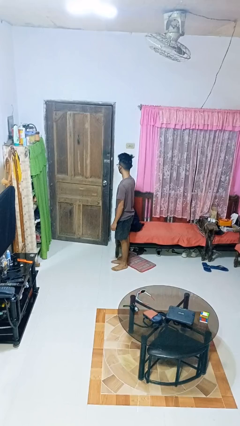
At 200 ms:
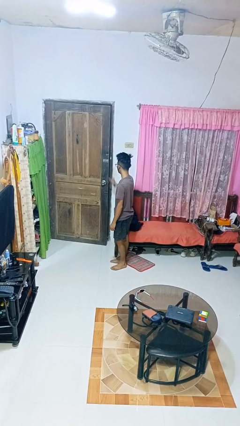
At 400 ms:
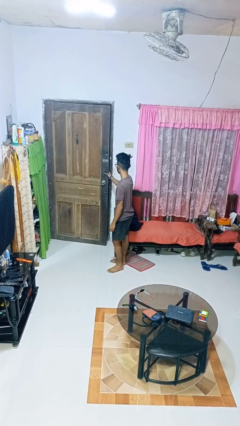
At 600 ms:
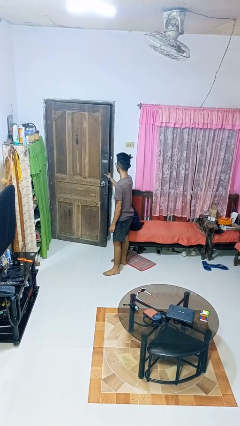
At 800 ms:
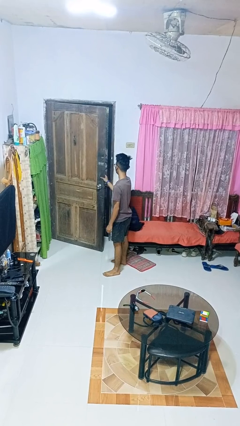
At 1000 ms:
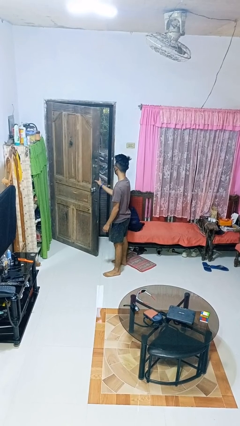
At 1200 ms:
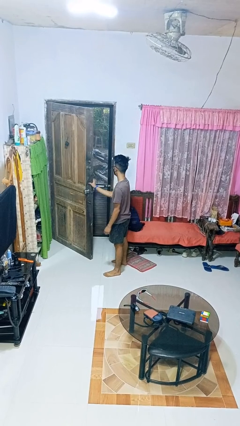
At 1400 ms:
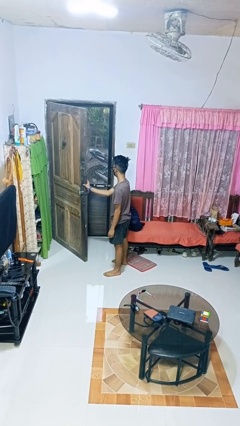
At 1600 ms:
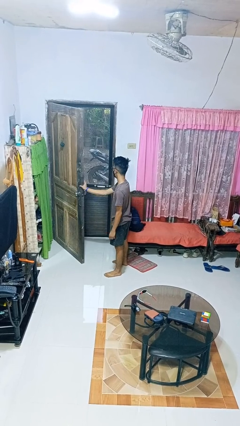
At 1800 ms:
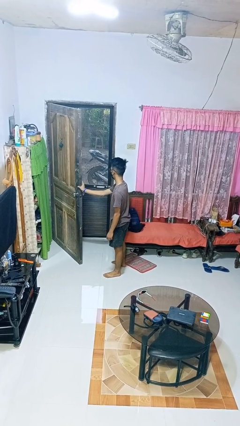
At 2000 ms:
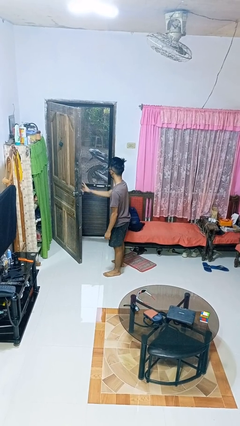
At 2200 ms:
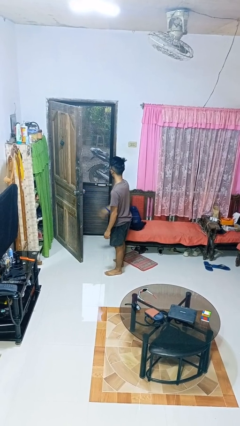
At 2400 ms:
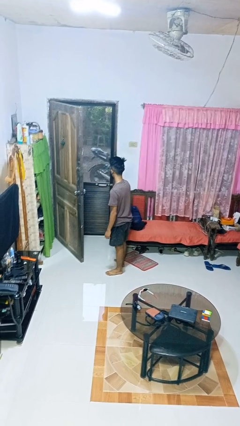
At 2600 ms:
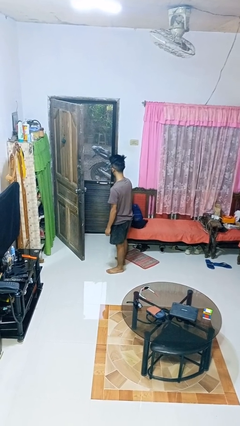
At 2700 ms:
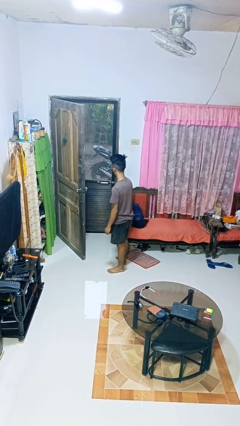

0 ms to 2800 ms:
person opens facility door

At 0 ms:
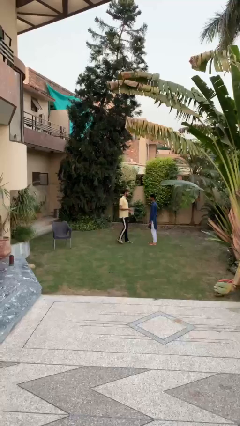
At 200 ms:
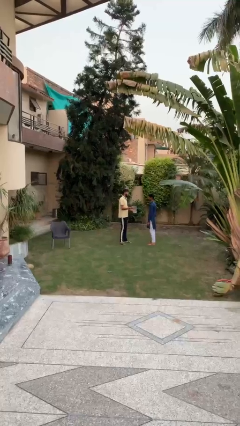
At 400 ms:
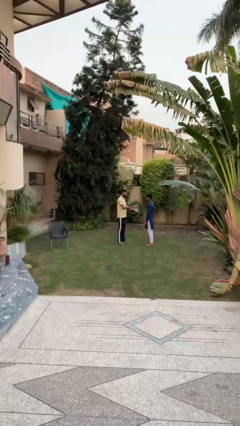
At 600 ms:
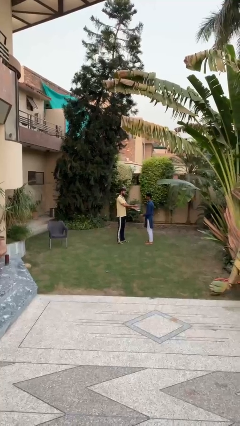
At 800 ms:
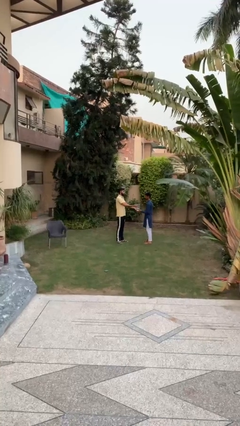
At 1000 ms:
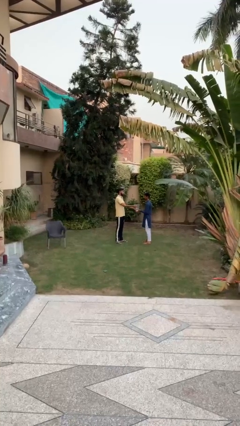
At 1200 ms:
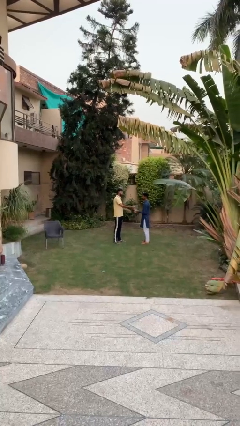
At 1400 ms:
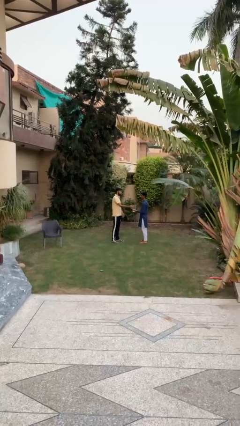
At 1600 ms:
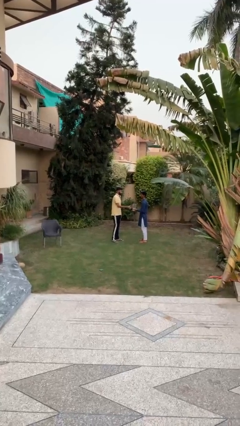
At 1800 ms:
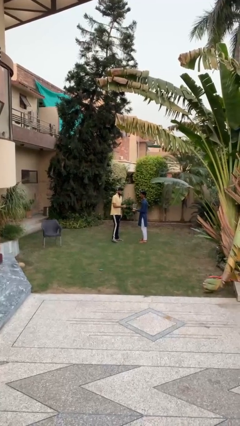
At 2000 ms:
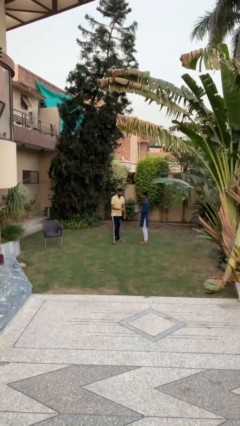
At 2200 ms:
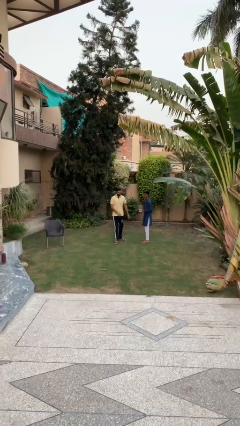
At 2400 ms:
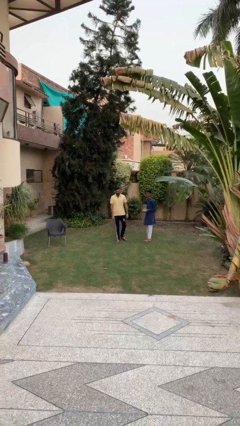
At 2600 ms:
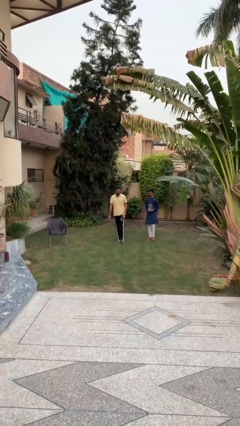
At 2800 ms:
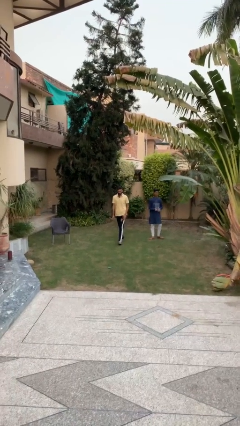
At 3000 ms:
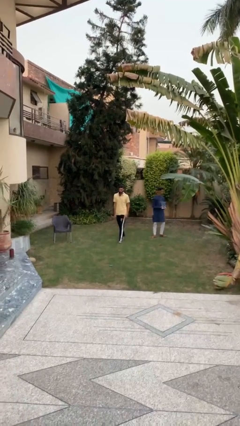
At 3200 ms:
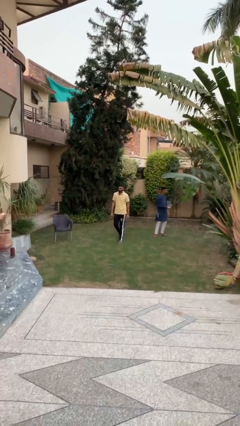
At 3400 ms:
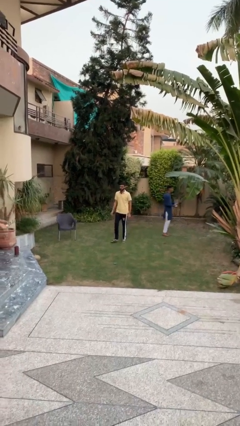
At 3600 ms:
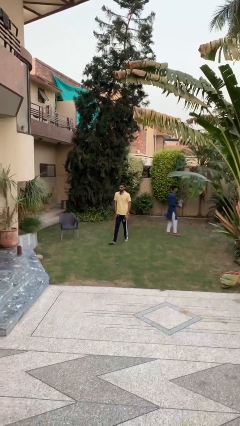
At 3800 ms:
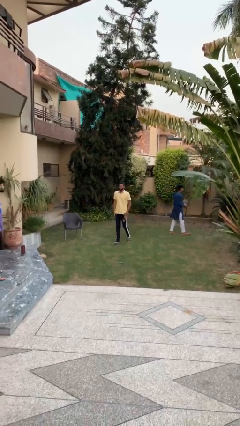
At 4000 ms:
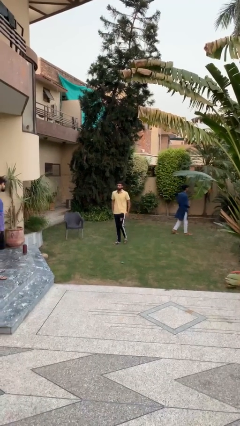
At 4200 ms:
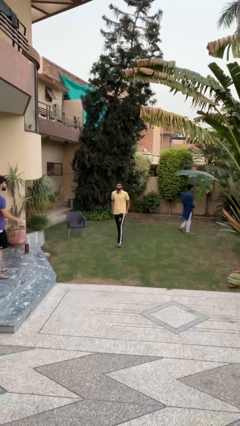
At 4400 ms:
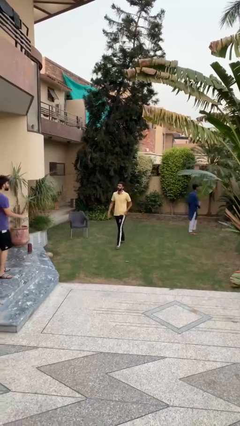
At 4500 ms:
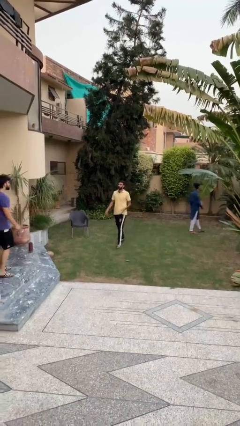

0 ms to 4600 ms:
person transfers object to person

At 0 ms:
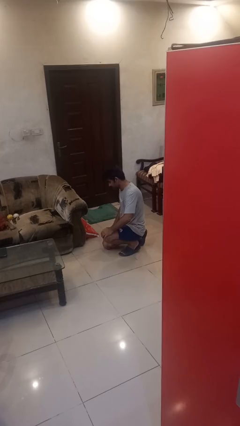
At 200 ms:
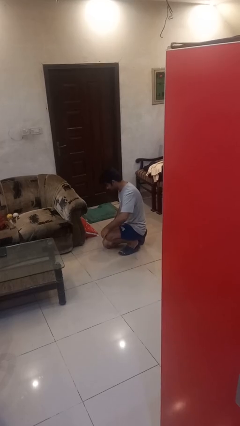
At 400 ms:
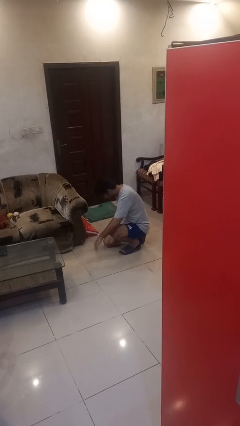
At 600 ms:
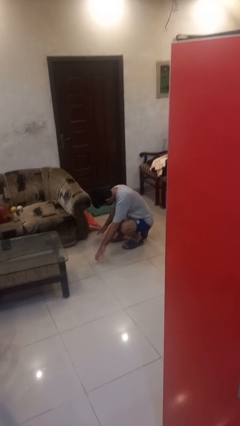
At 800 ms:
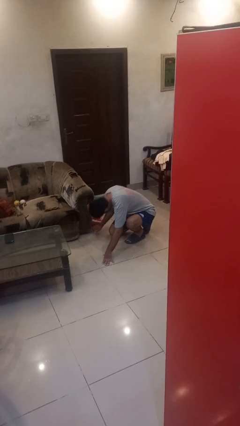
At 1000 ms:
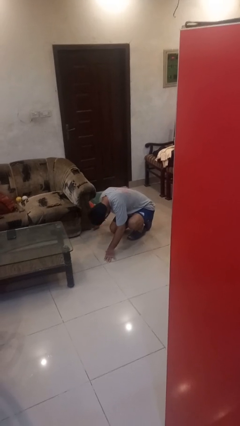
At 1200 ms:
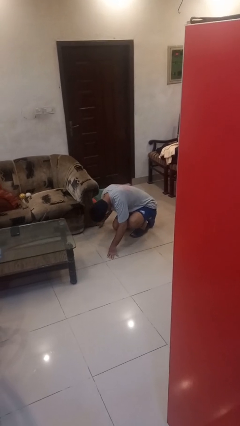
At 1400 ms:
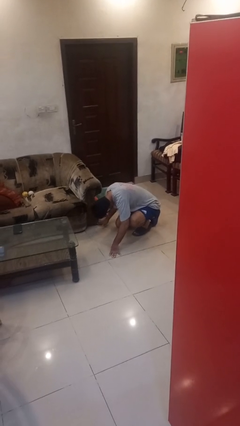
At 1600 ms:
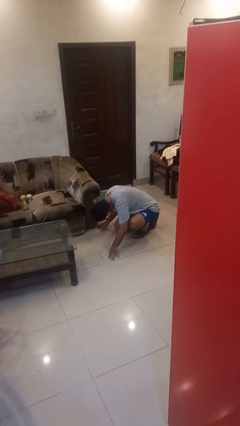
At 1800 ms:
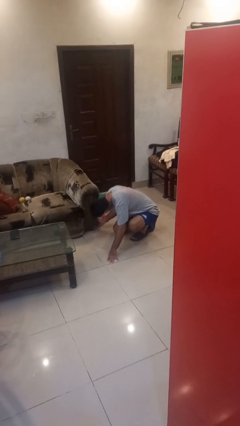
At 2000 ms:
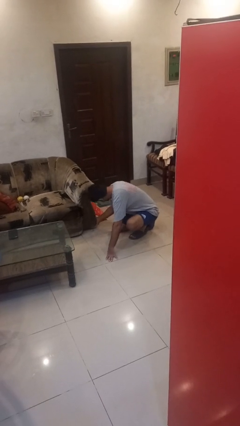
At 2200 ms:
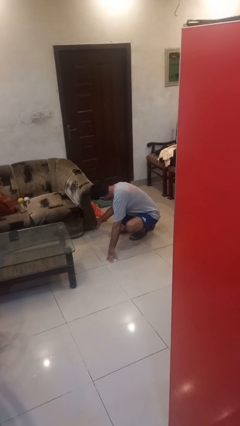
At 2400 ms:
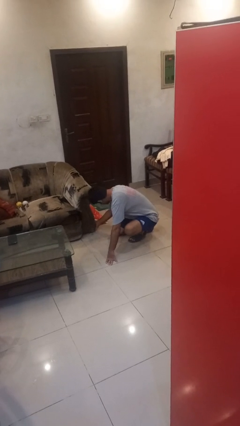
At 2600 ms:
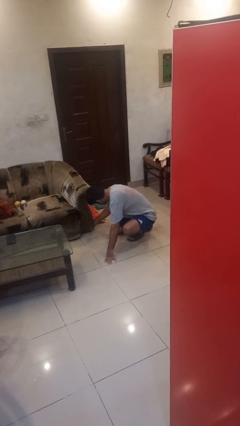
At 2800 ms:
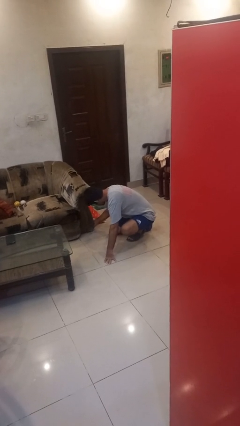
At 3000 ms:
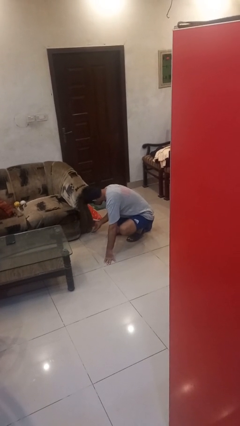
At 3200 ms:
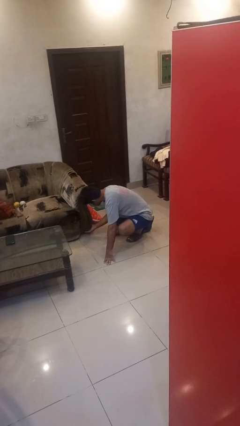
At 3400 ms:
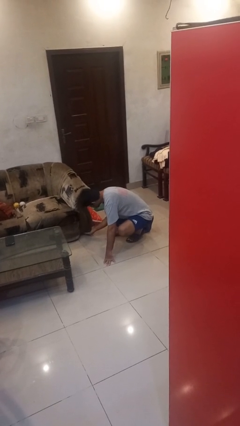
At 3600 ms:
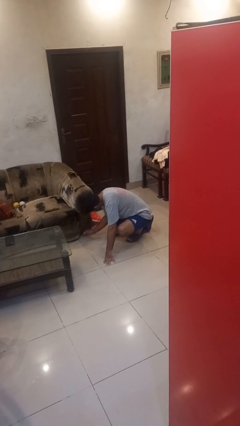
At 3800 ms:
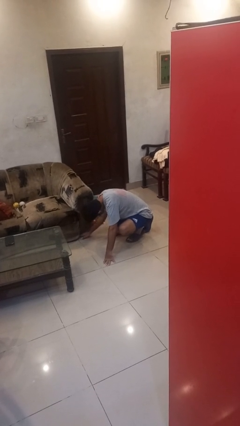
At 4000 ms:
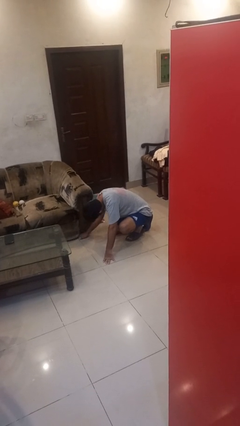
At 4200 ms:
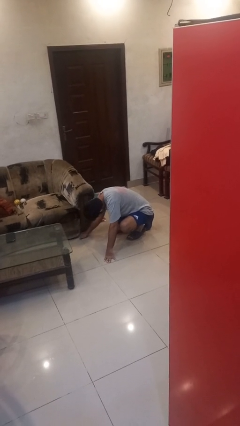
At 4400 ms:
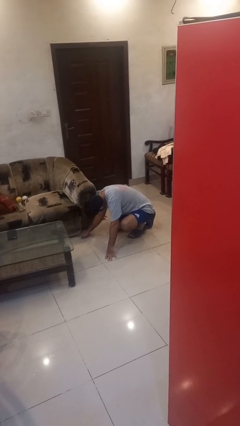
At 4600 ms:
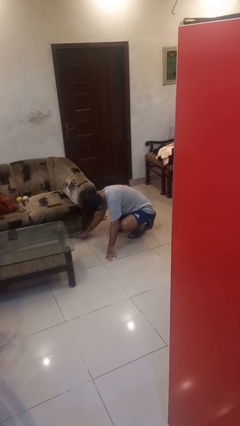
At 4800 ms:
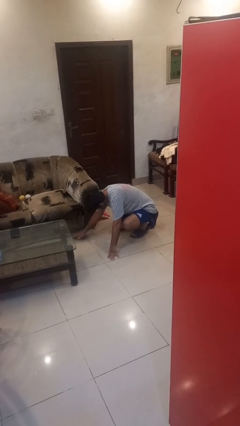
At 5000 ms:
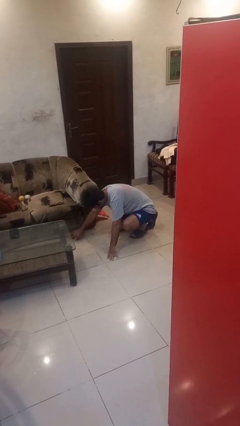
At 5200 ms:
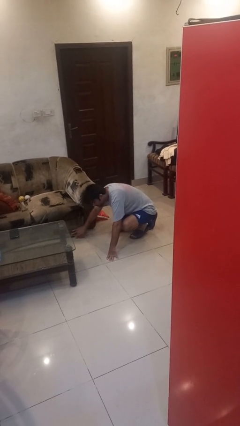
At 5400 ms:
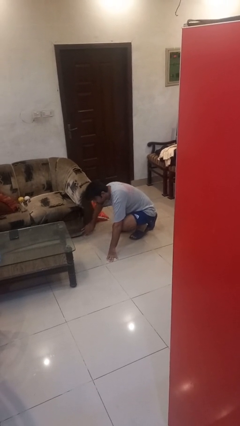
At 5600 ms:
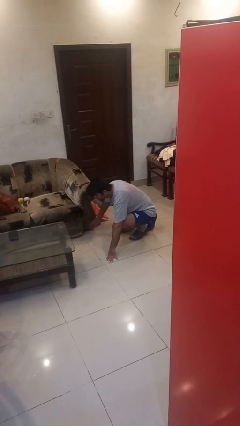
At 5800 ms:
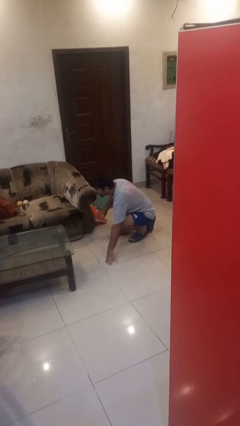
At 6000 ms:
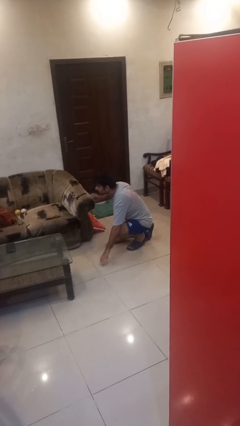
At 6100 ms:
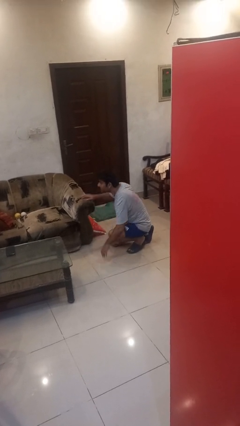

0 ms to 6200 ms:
person searches under couch

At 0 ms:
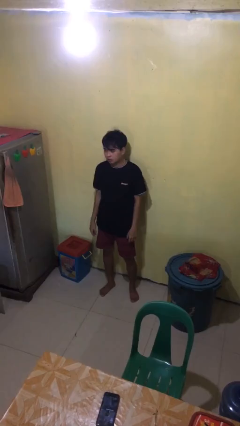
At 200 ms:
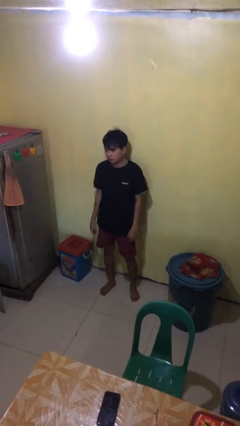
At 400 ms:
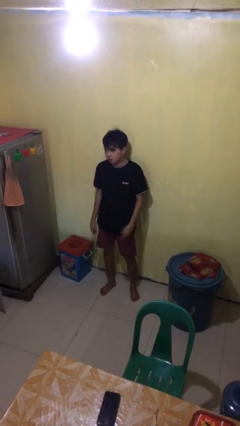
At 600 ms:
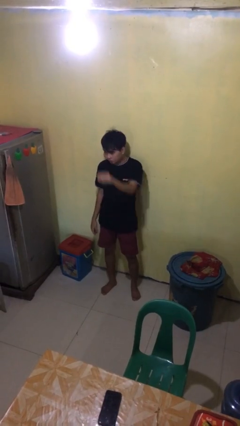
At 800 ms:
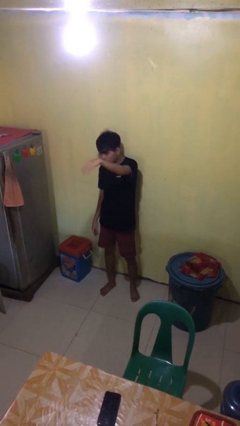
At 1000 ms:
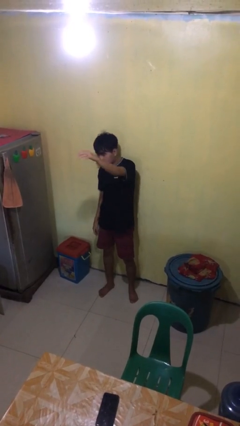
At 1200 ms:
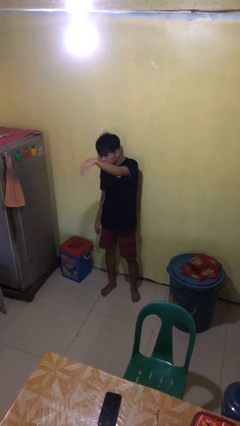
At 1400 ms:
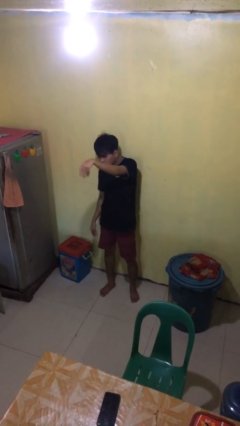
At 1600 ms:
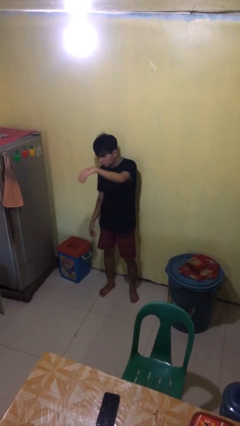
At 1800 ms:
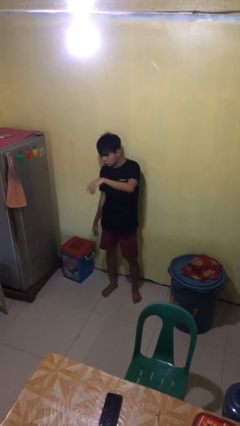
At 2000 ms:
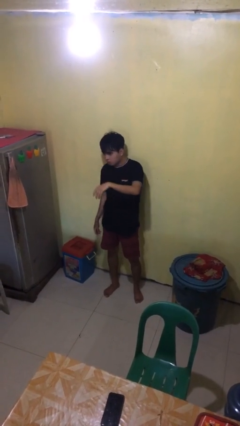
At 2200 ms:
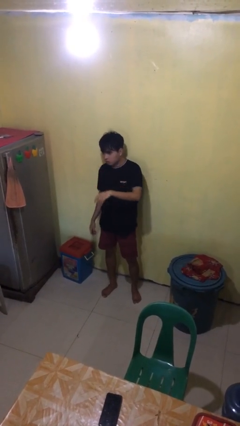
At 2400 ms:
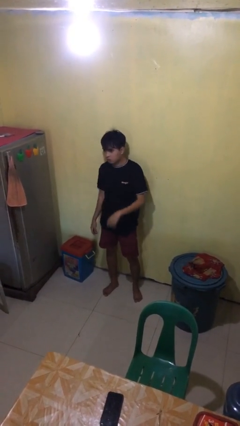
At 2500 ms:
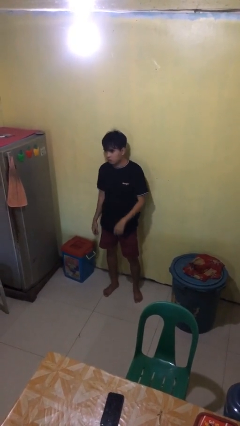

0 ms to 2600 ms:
person gestures come here

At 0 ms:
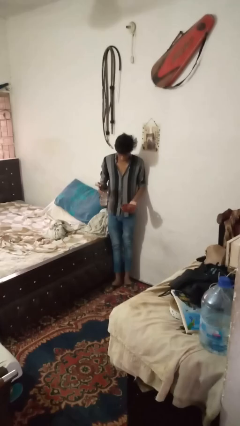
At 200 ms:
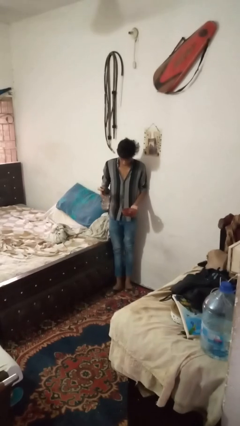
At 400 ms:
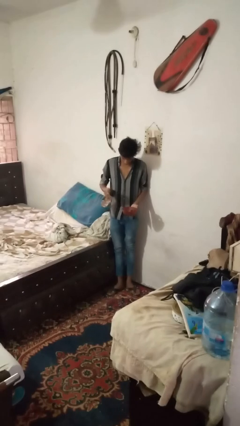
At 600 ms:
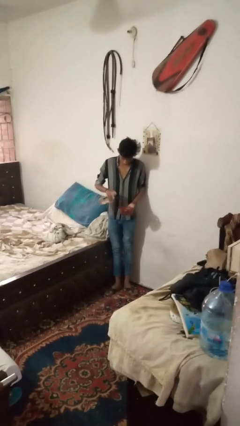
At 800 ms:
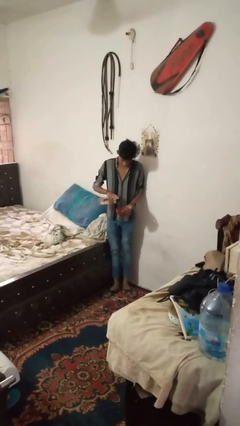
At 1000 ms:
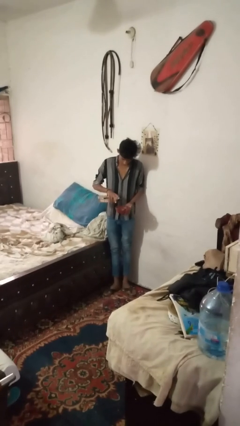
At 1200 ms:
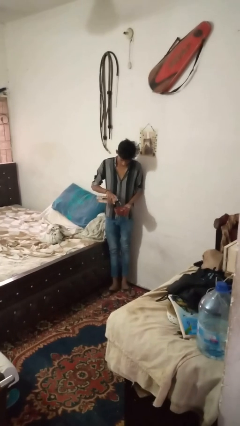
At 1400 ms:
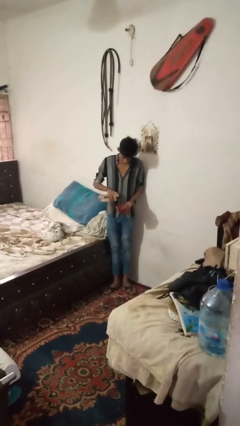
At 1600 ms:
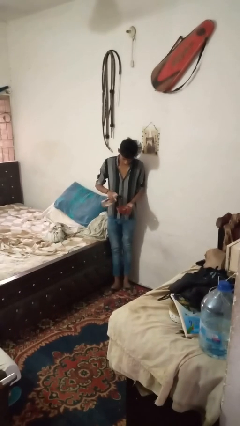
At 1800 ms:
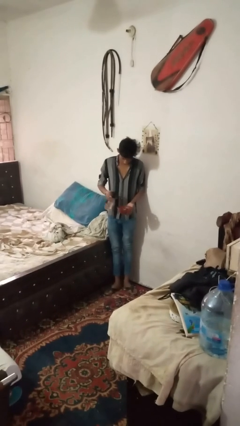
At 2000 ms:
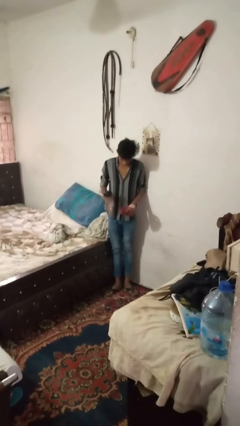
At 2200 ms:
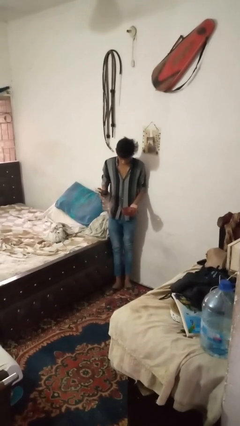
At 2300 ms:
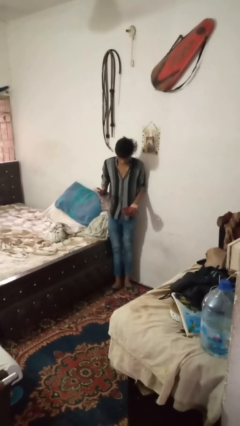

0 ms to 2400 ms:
person pours liquid into cup